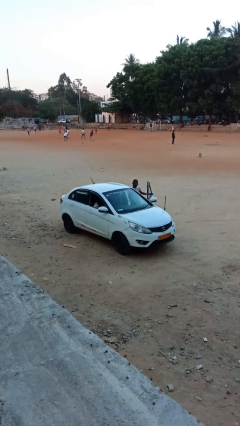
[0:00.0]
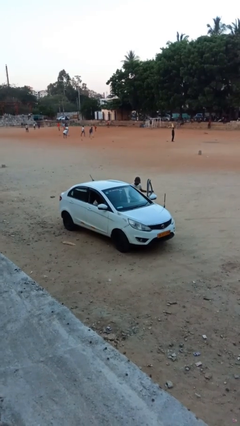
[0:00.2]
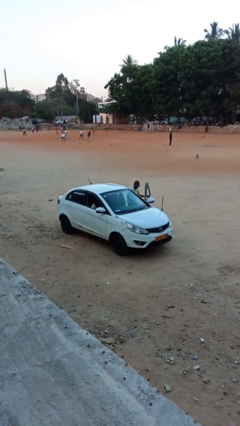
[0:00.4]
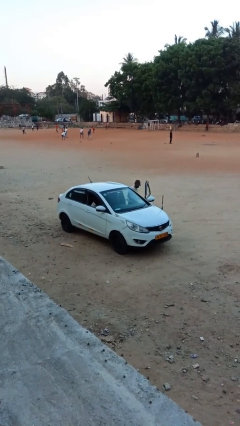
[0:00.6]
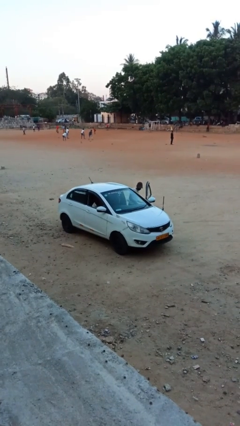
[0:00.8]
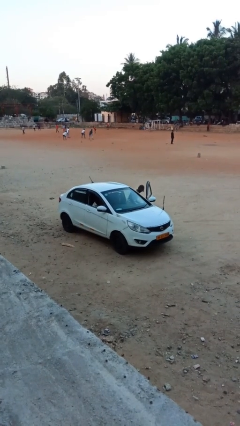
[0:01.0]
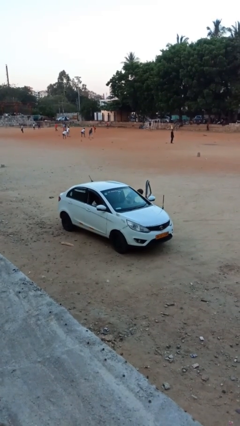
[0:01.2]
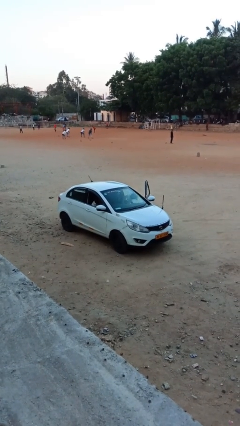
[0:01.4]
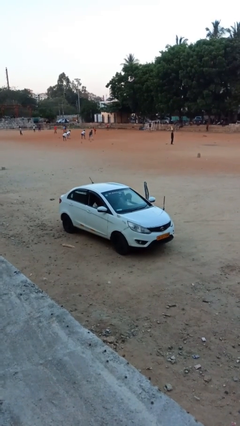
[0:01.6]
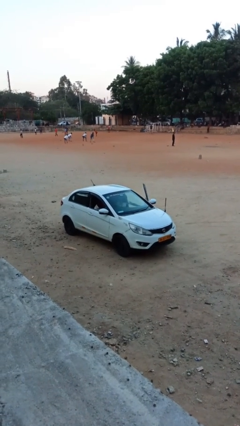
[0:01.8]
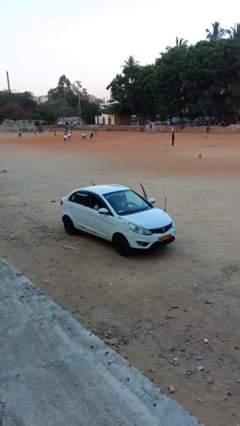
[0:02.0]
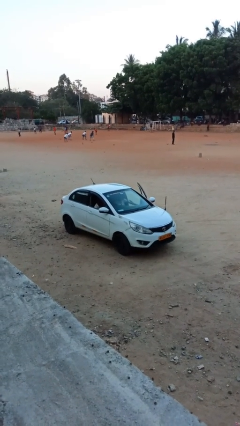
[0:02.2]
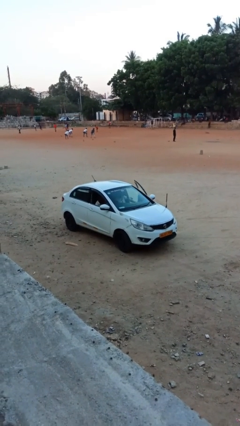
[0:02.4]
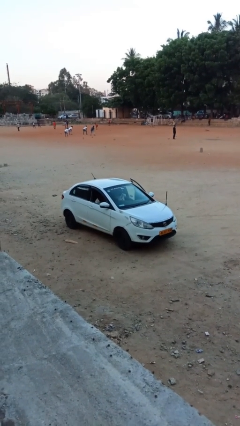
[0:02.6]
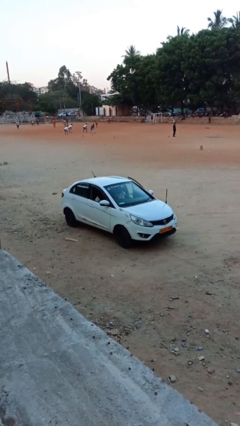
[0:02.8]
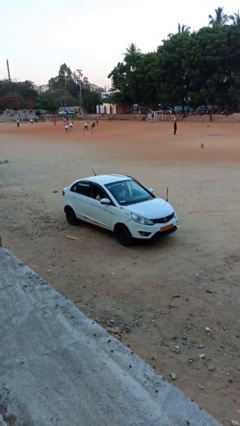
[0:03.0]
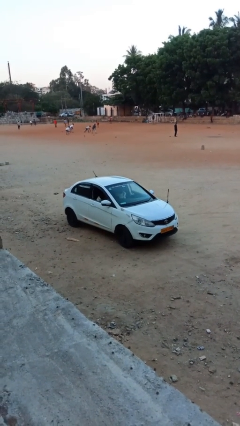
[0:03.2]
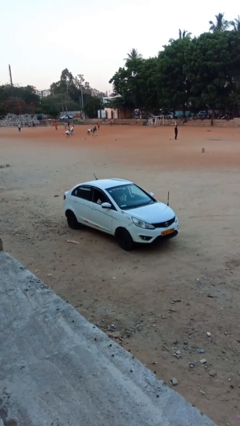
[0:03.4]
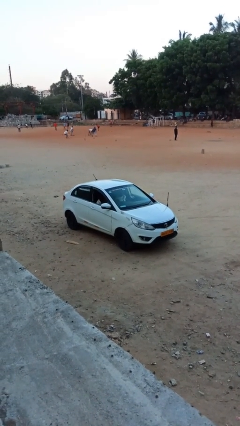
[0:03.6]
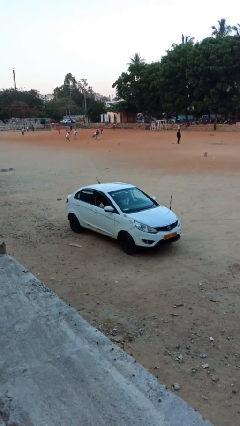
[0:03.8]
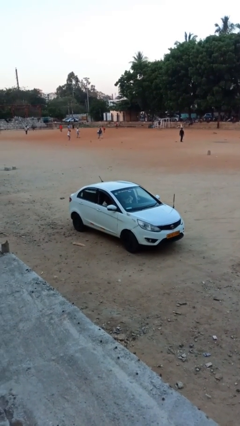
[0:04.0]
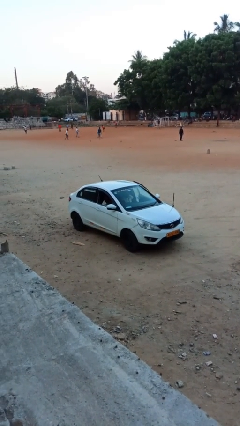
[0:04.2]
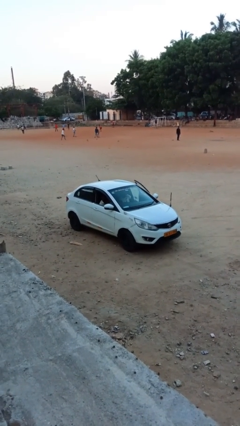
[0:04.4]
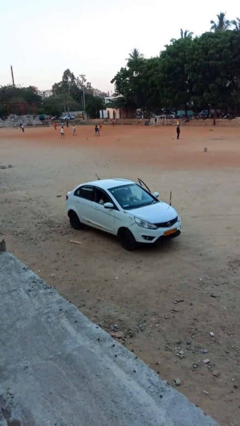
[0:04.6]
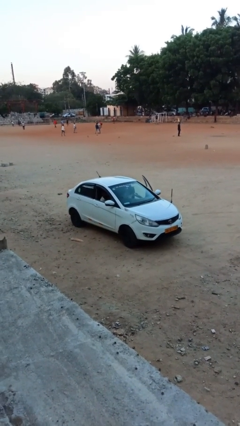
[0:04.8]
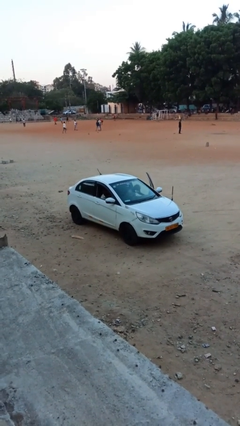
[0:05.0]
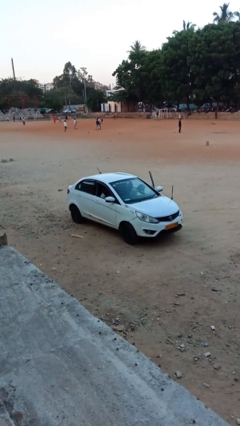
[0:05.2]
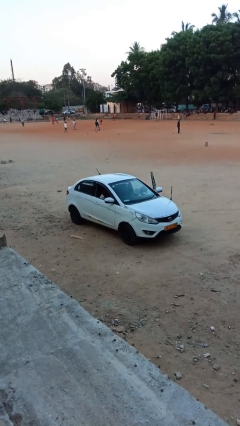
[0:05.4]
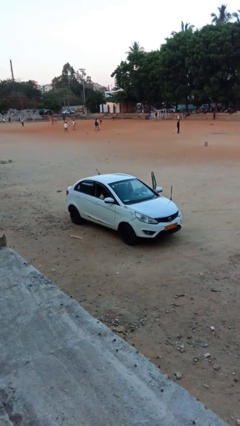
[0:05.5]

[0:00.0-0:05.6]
car picks up person

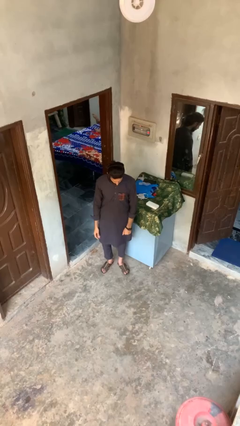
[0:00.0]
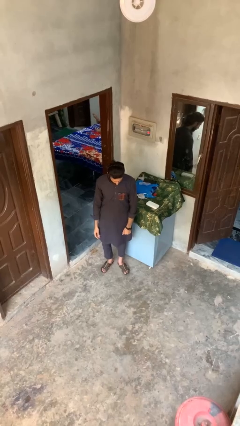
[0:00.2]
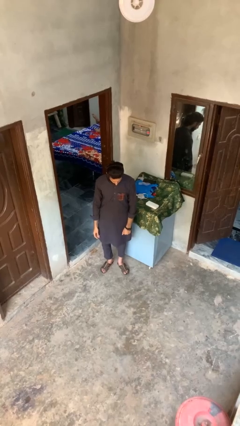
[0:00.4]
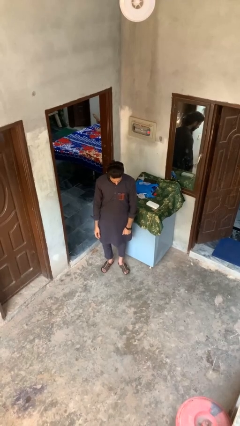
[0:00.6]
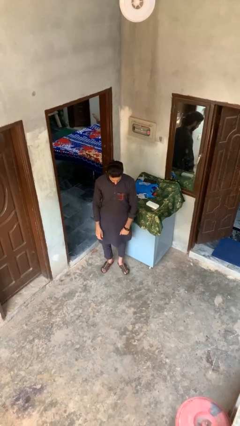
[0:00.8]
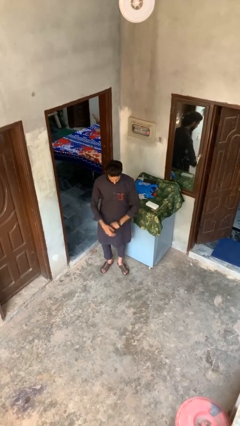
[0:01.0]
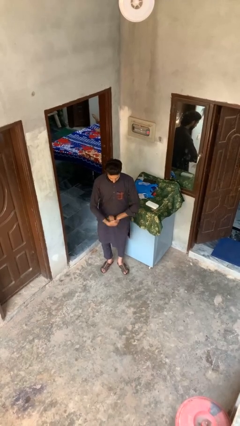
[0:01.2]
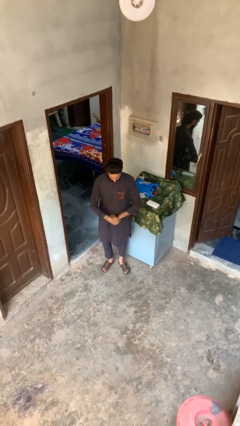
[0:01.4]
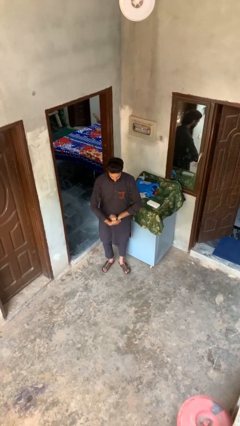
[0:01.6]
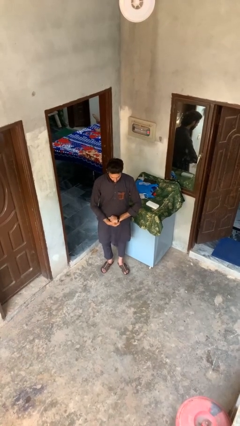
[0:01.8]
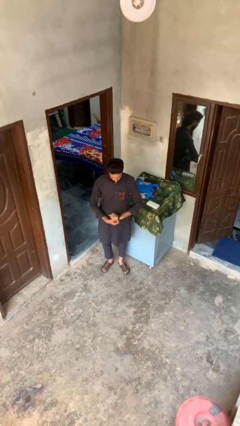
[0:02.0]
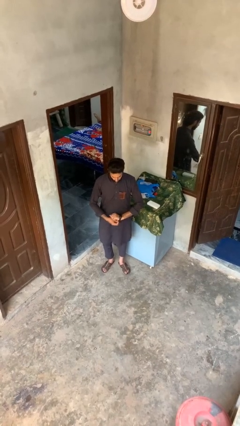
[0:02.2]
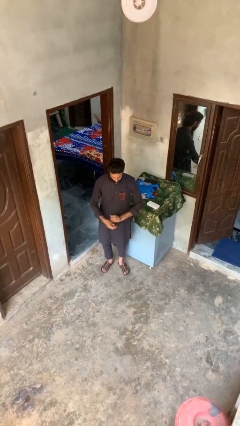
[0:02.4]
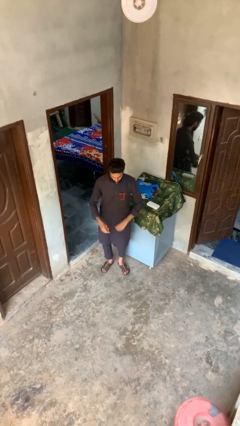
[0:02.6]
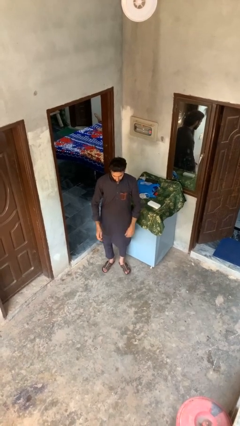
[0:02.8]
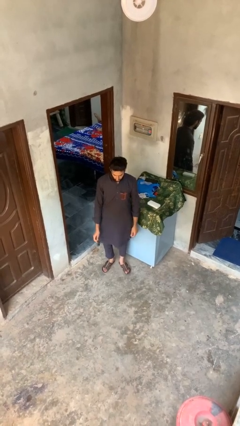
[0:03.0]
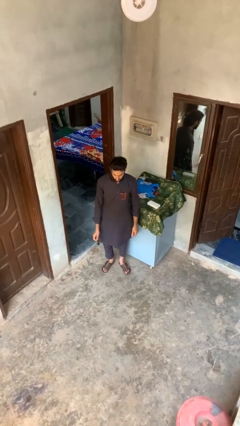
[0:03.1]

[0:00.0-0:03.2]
person takes off wristwatch

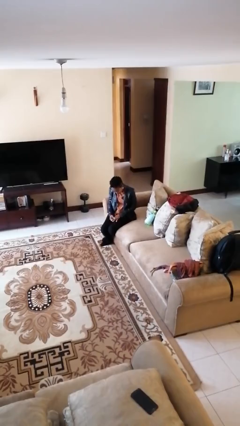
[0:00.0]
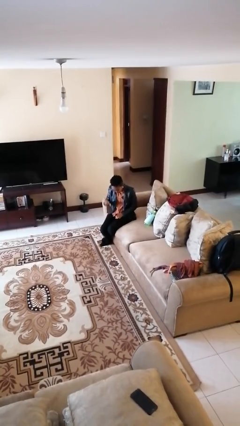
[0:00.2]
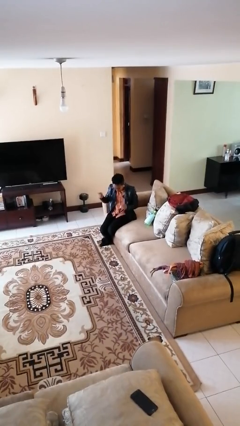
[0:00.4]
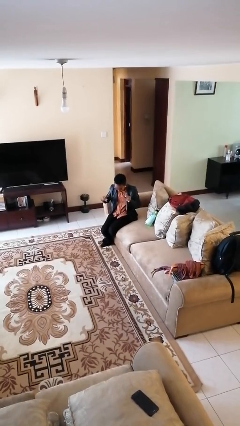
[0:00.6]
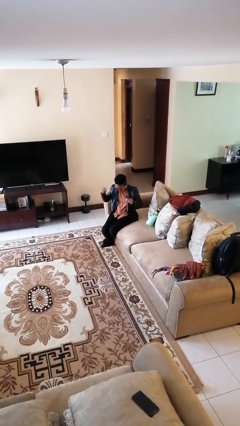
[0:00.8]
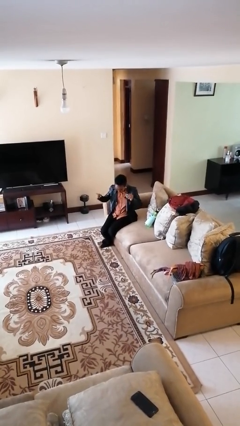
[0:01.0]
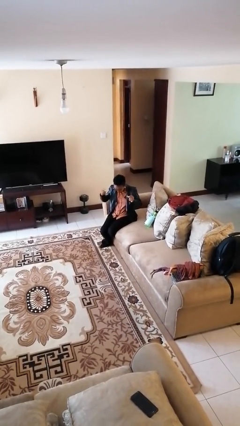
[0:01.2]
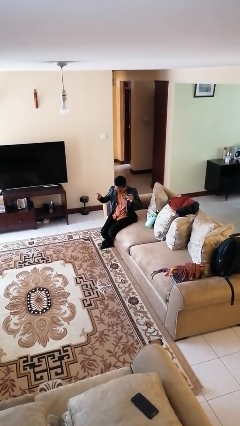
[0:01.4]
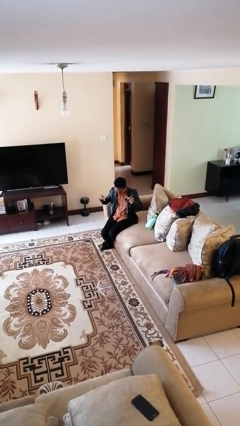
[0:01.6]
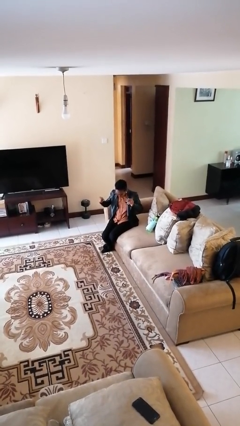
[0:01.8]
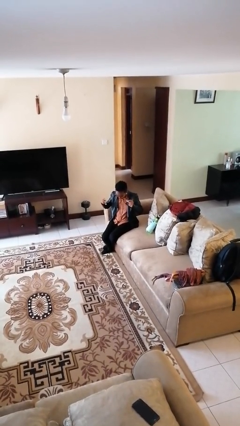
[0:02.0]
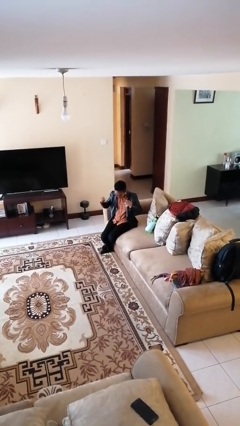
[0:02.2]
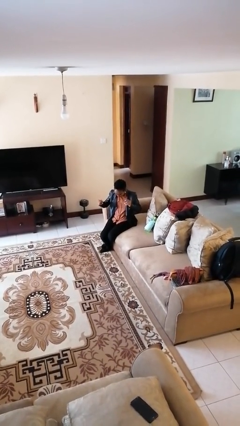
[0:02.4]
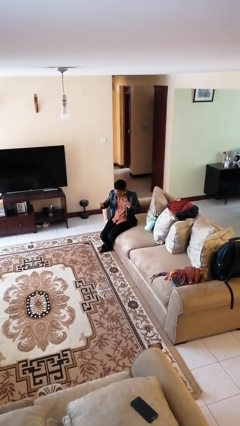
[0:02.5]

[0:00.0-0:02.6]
person snaps fingers

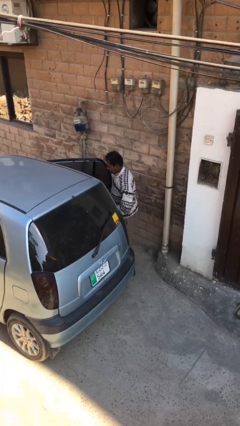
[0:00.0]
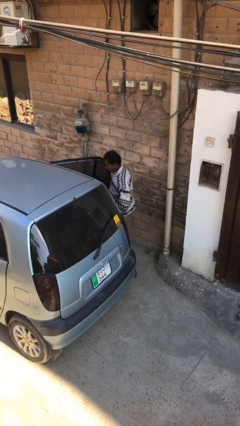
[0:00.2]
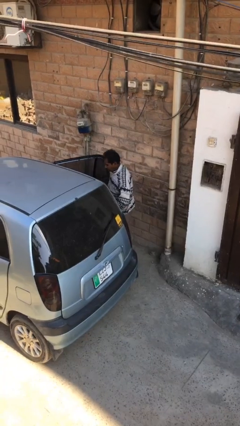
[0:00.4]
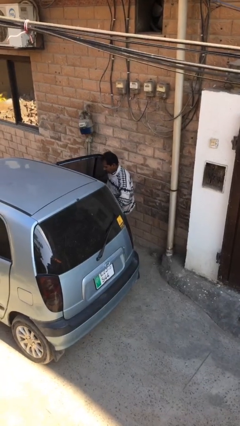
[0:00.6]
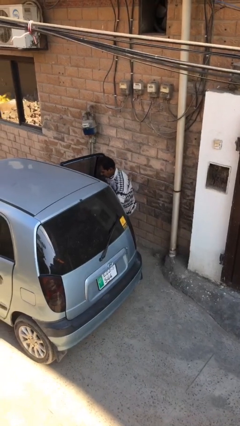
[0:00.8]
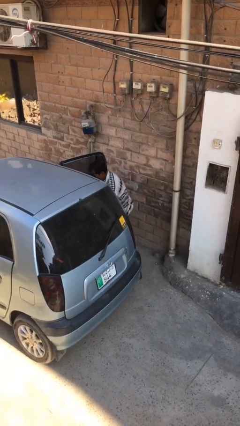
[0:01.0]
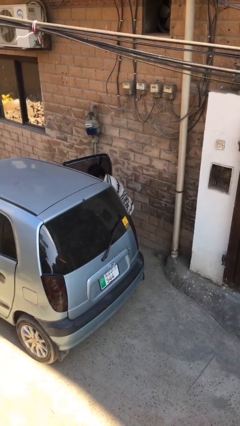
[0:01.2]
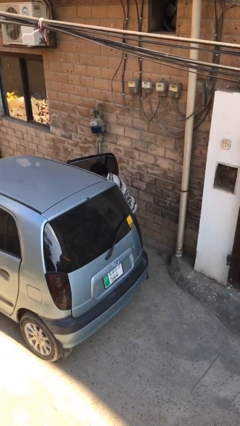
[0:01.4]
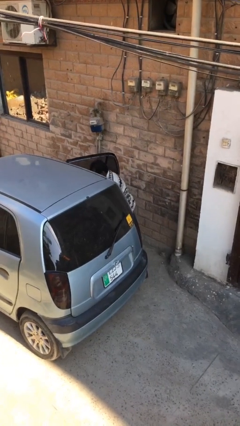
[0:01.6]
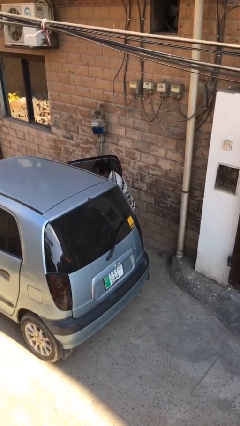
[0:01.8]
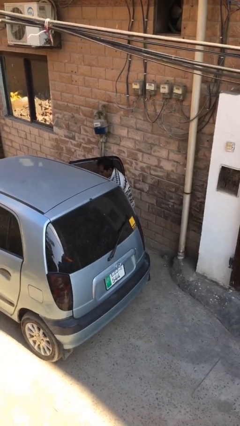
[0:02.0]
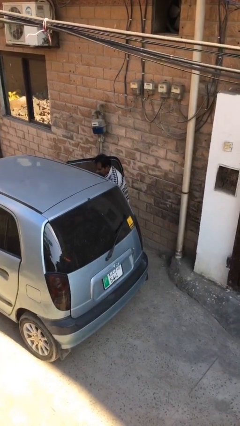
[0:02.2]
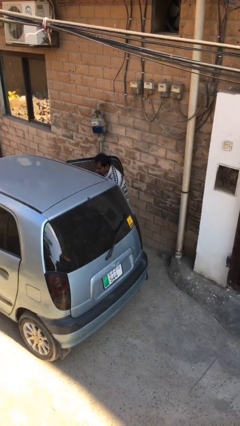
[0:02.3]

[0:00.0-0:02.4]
person loads car

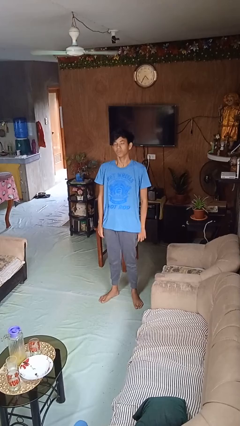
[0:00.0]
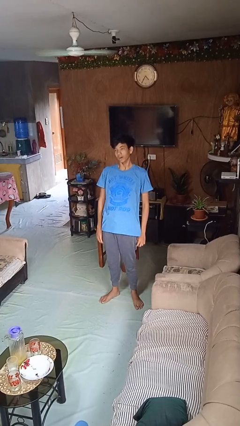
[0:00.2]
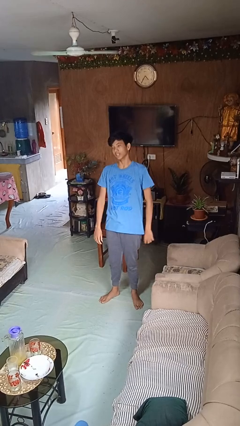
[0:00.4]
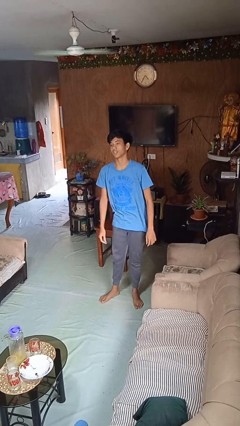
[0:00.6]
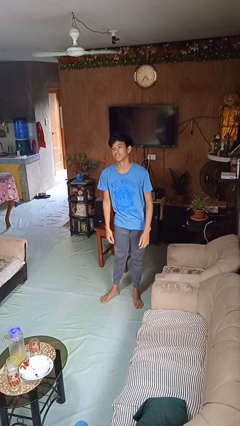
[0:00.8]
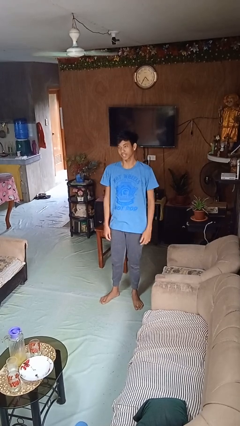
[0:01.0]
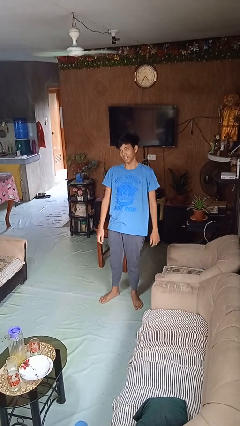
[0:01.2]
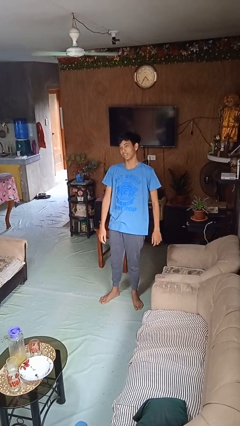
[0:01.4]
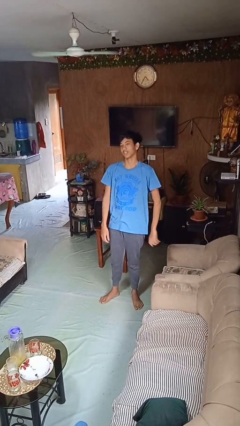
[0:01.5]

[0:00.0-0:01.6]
person dances in place

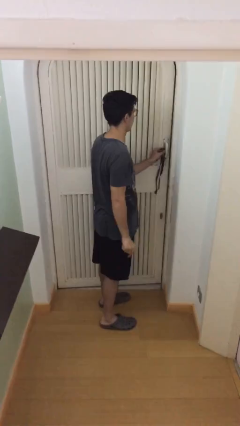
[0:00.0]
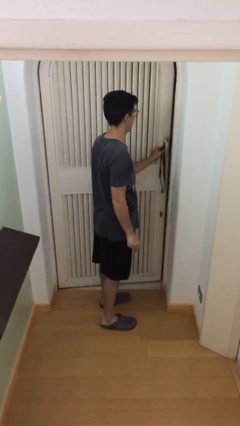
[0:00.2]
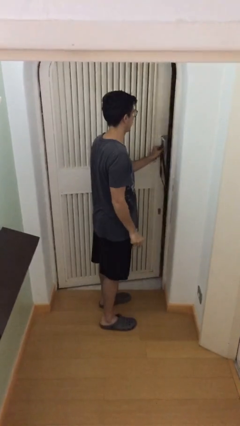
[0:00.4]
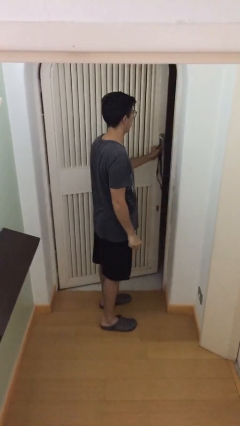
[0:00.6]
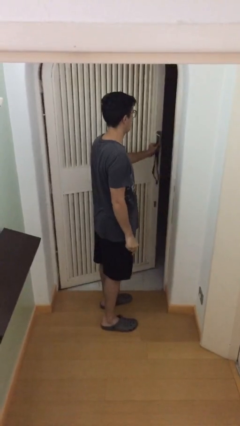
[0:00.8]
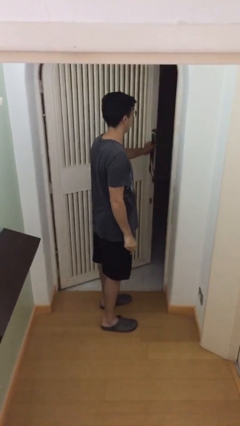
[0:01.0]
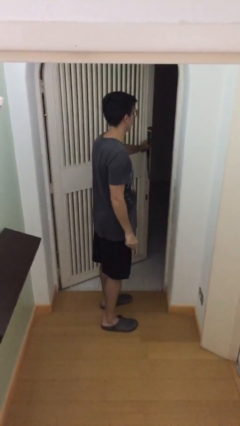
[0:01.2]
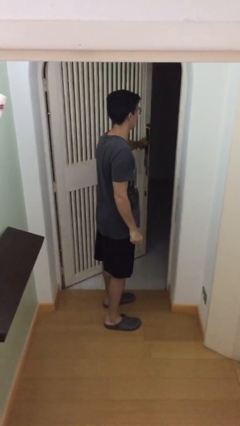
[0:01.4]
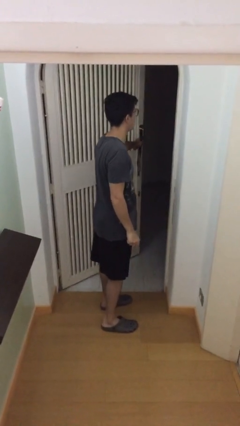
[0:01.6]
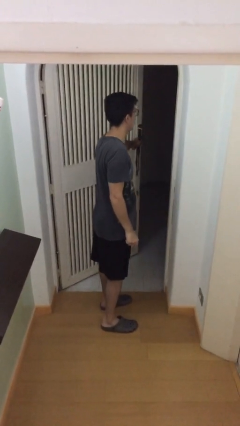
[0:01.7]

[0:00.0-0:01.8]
person opens facility door
